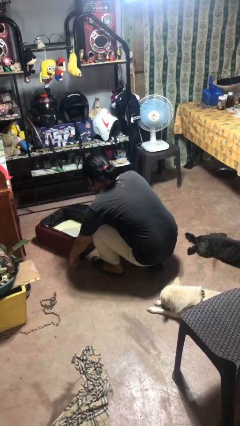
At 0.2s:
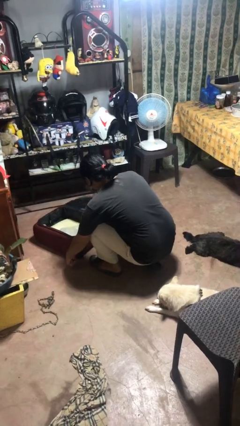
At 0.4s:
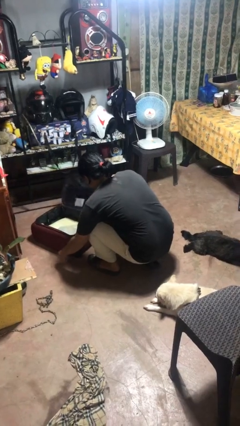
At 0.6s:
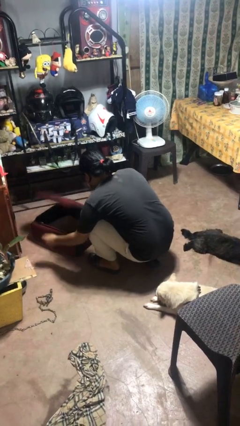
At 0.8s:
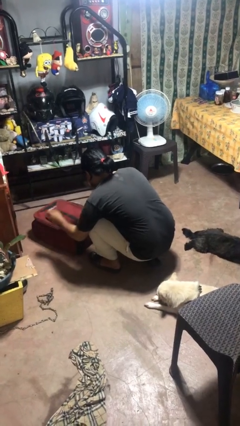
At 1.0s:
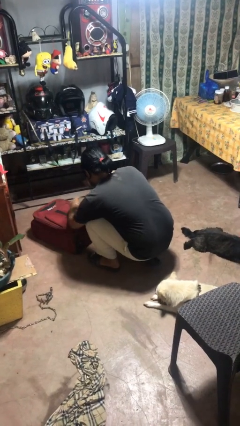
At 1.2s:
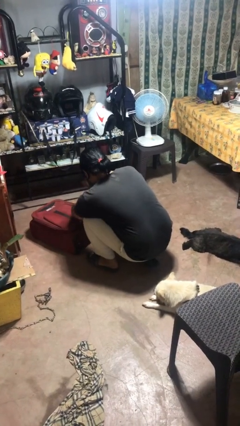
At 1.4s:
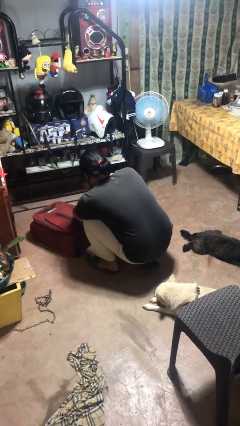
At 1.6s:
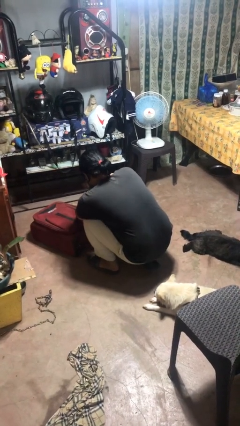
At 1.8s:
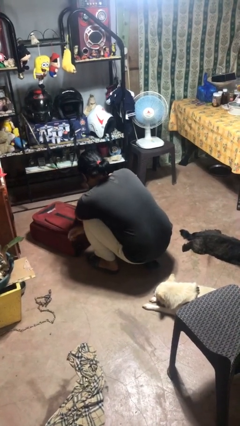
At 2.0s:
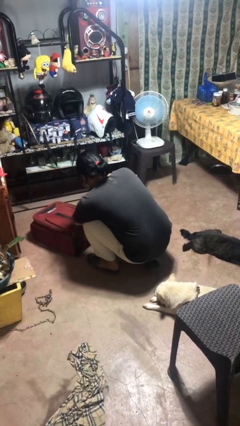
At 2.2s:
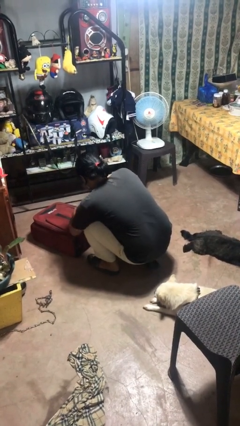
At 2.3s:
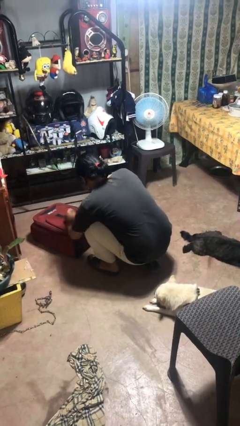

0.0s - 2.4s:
person closes suitcase

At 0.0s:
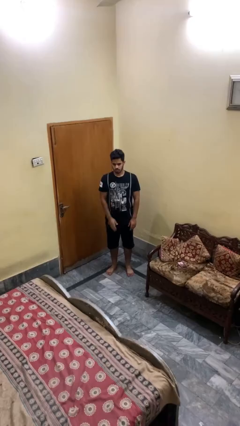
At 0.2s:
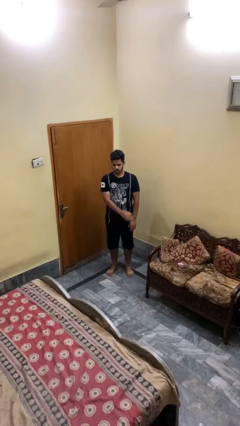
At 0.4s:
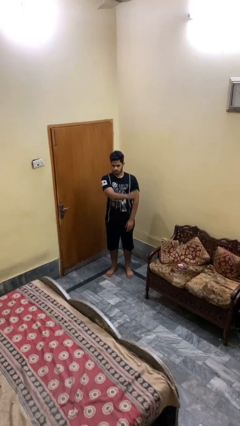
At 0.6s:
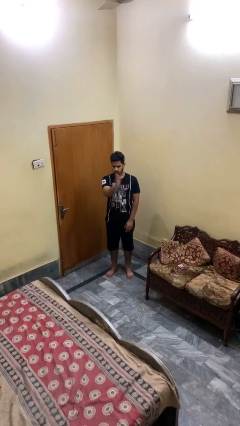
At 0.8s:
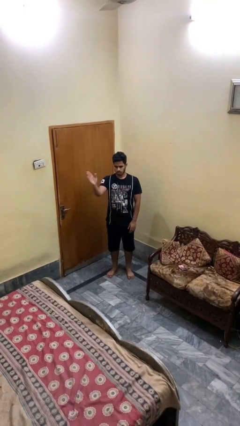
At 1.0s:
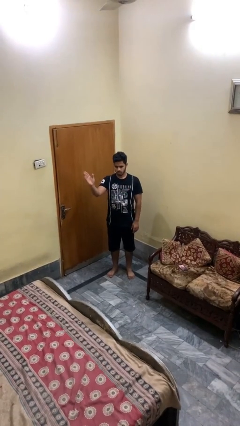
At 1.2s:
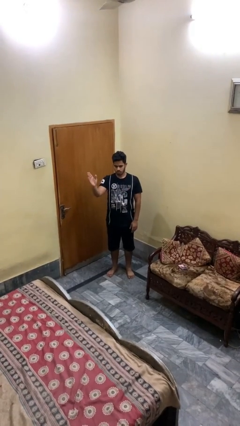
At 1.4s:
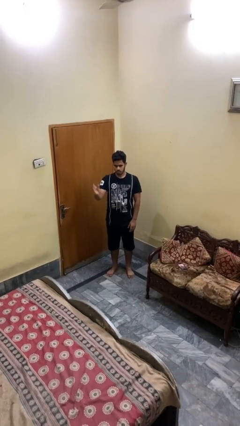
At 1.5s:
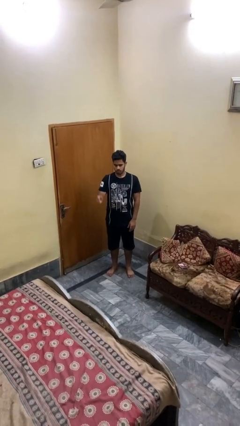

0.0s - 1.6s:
person gestures swipe right

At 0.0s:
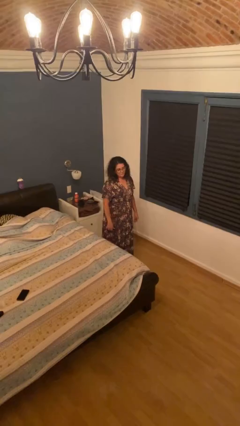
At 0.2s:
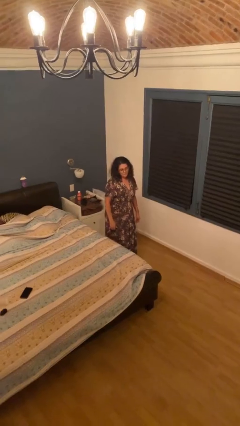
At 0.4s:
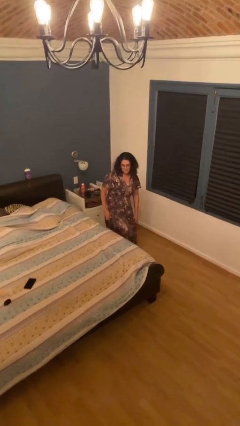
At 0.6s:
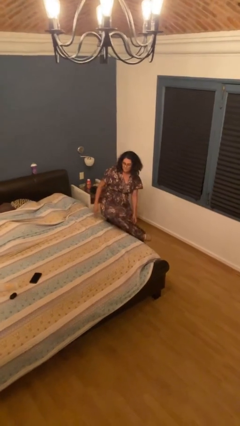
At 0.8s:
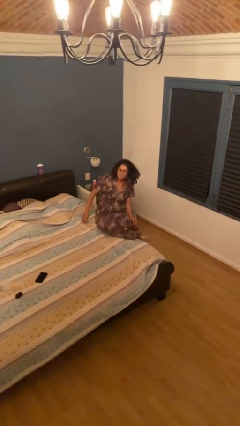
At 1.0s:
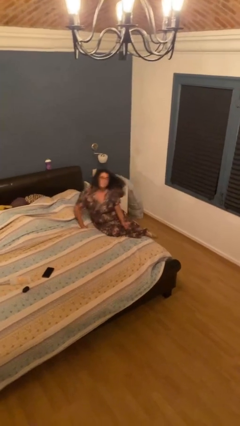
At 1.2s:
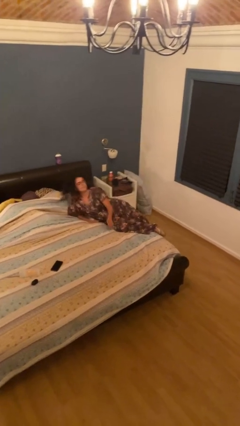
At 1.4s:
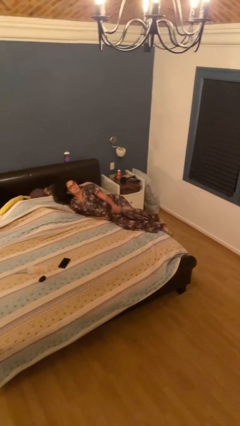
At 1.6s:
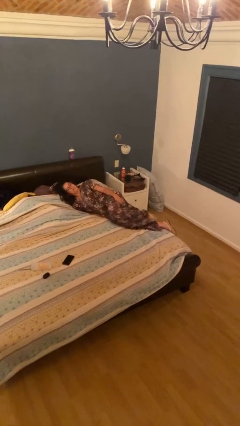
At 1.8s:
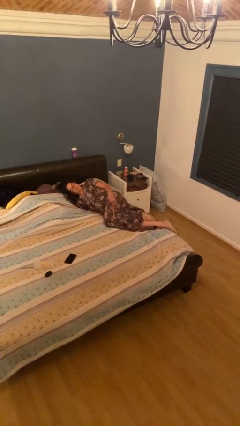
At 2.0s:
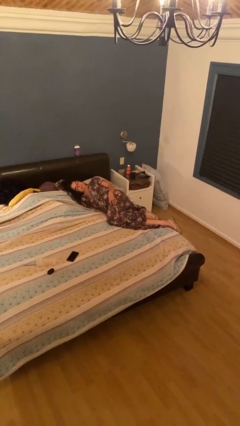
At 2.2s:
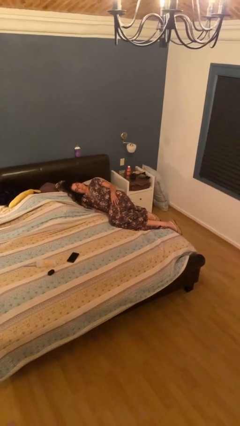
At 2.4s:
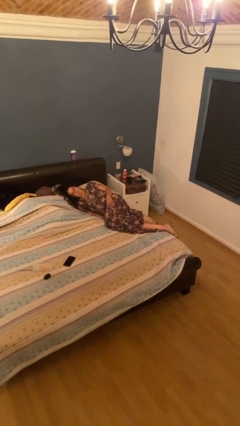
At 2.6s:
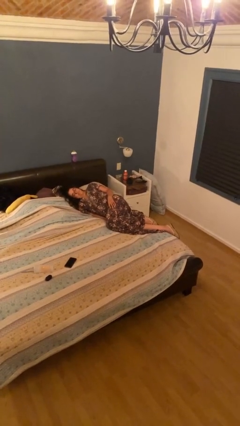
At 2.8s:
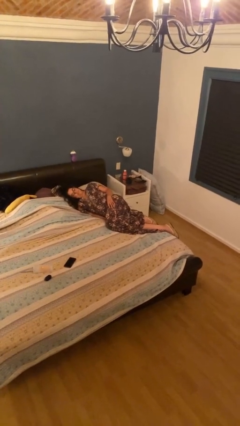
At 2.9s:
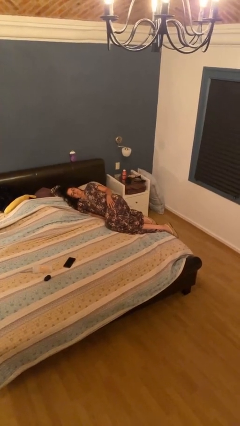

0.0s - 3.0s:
person lies down on bed

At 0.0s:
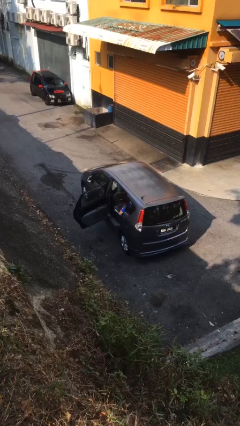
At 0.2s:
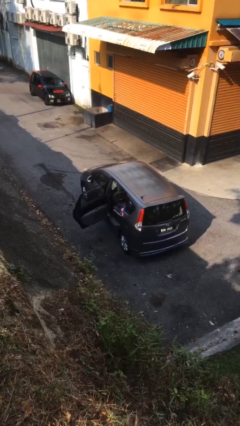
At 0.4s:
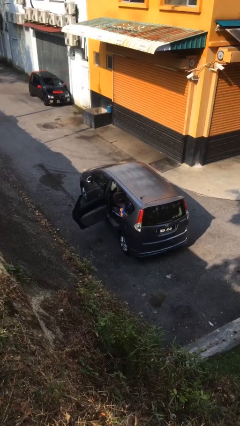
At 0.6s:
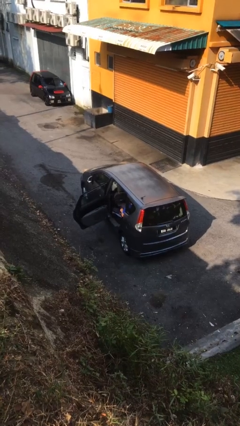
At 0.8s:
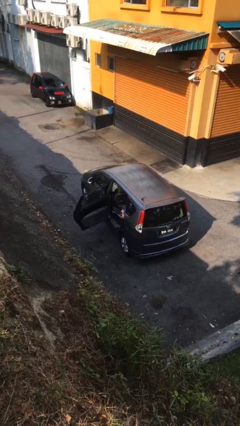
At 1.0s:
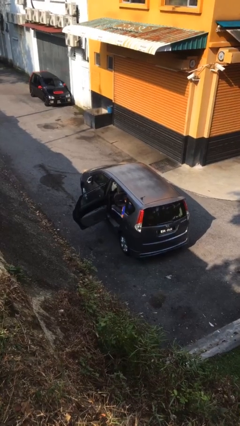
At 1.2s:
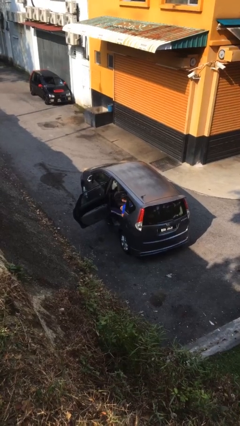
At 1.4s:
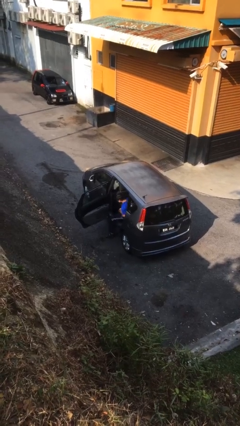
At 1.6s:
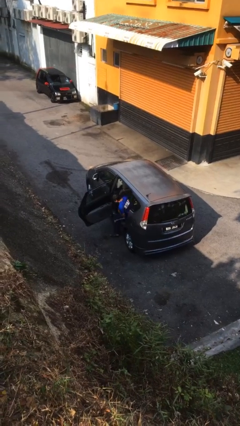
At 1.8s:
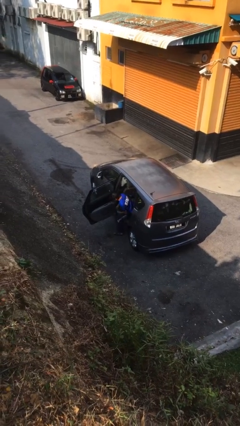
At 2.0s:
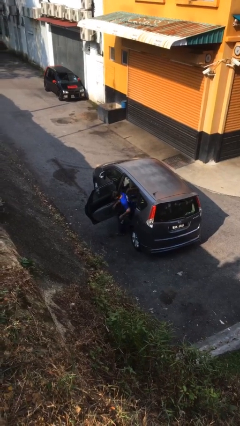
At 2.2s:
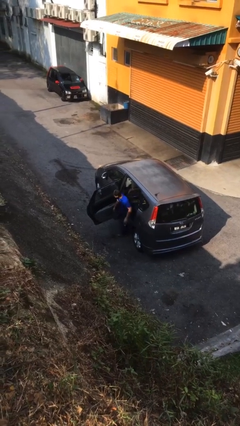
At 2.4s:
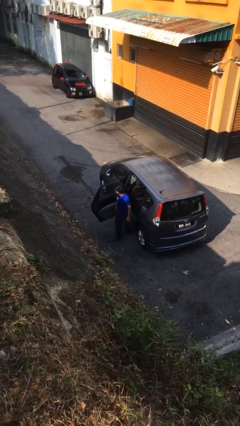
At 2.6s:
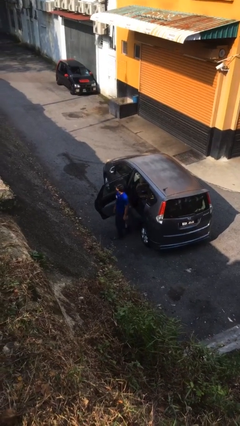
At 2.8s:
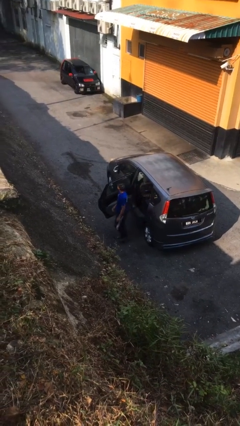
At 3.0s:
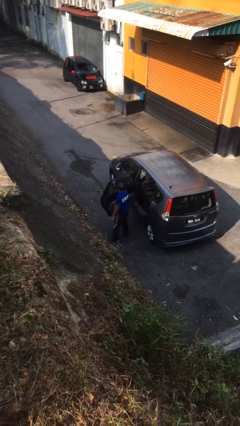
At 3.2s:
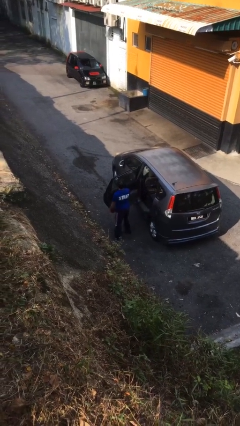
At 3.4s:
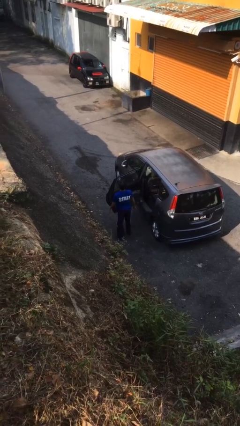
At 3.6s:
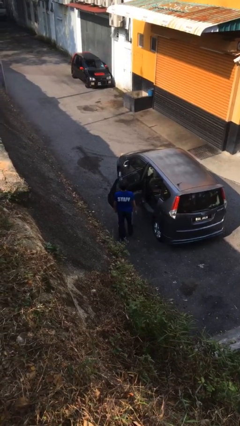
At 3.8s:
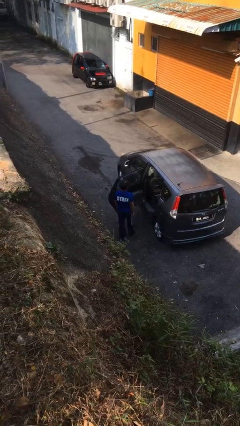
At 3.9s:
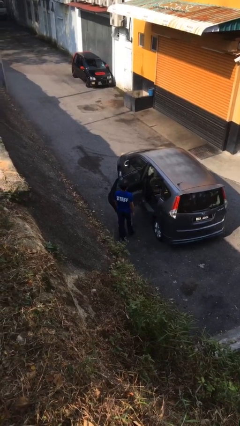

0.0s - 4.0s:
person exits car

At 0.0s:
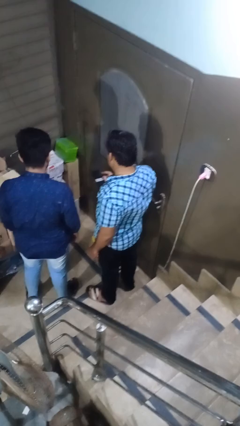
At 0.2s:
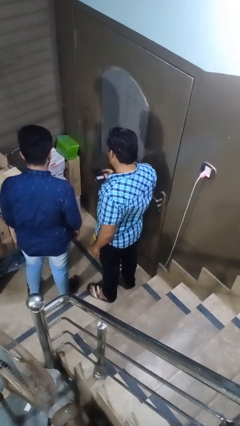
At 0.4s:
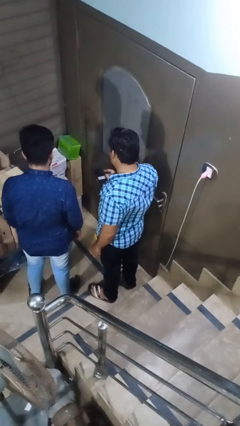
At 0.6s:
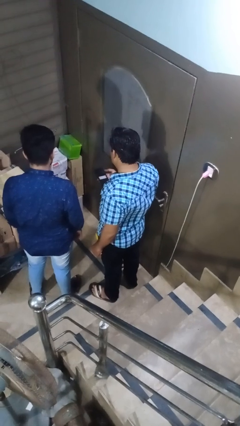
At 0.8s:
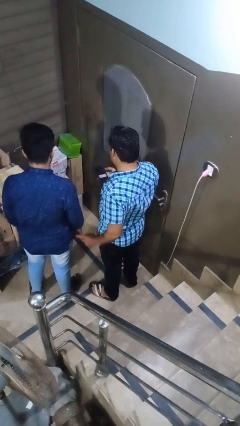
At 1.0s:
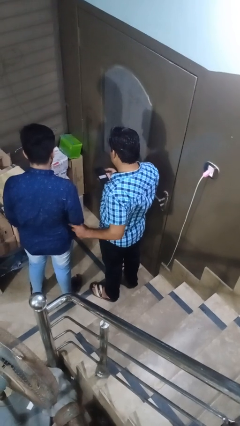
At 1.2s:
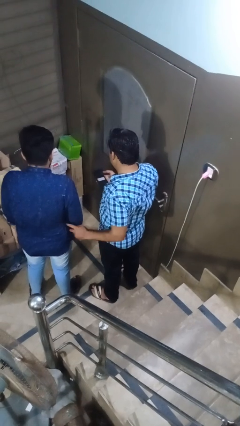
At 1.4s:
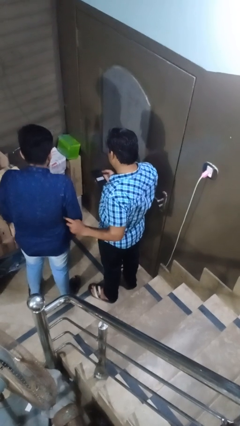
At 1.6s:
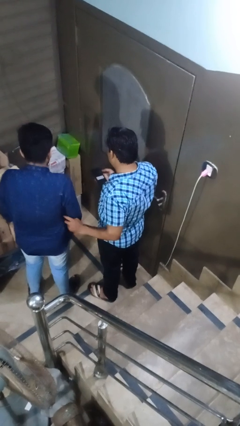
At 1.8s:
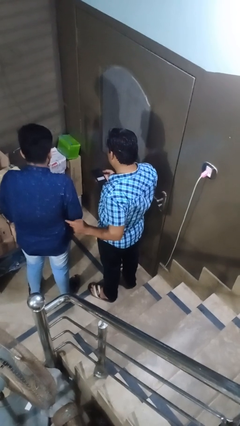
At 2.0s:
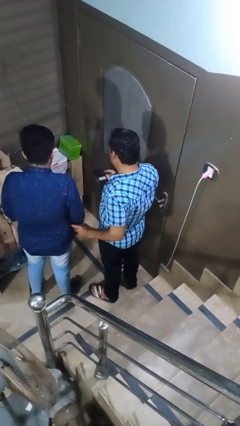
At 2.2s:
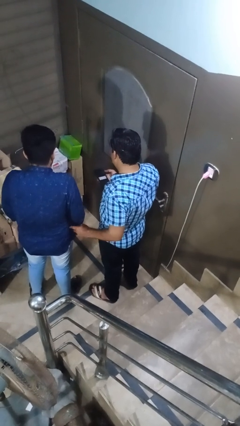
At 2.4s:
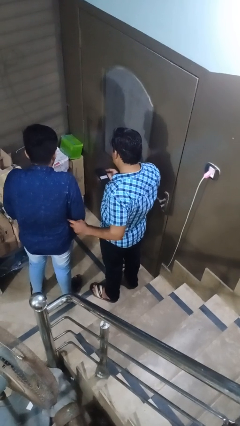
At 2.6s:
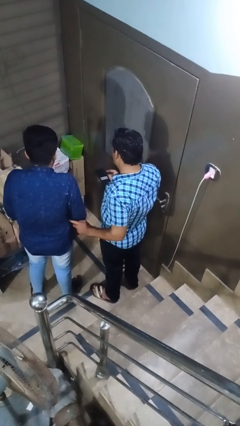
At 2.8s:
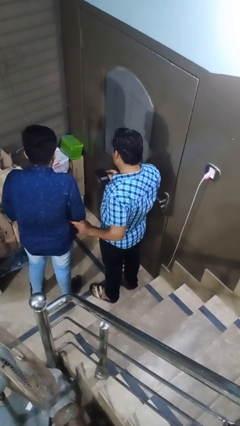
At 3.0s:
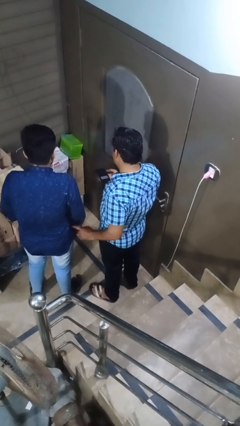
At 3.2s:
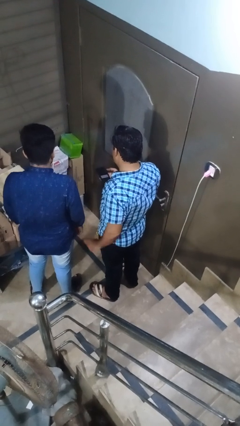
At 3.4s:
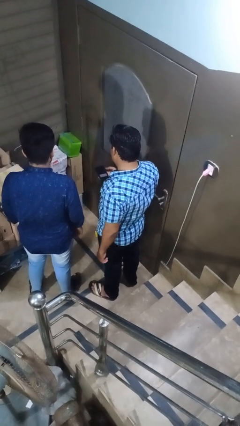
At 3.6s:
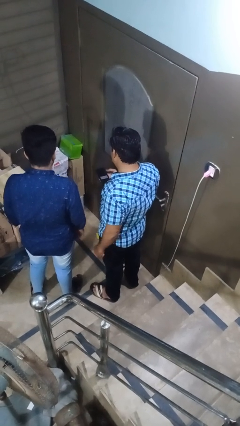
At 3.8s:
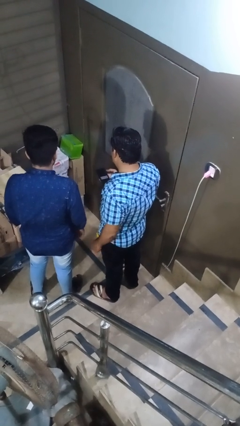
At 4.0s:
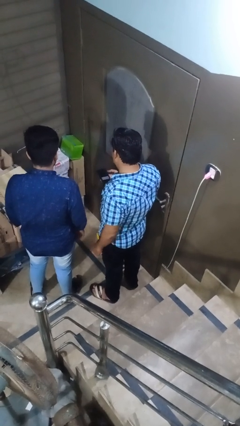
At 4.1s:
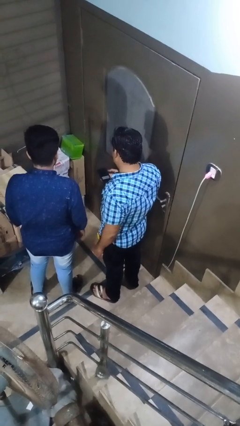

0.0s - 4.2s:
person tickles person

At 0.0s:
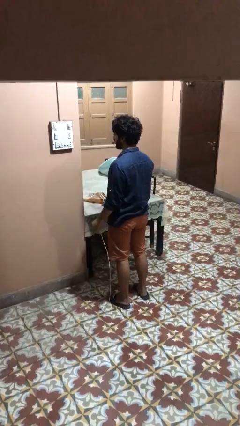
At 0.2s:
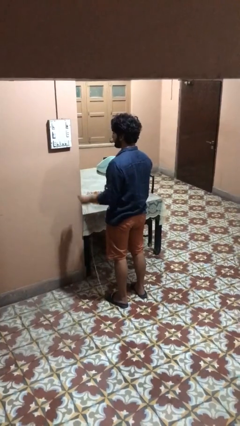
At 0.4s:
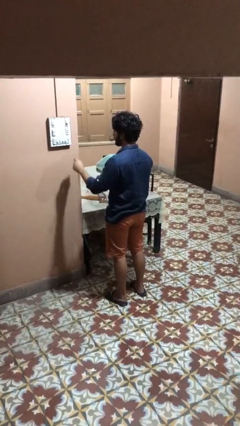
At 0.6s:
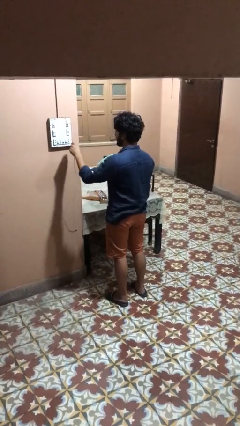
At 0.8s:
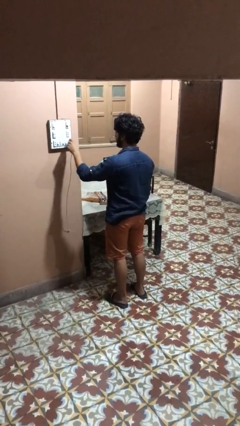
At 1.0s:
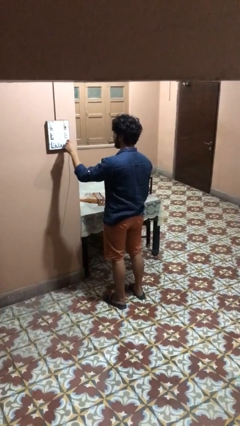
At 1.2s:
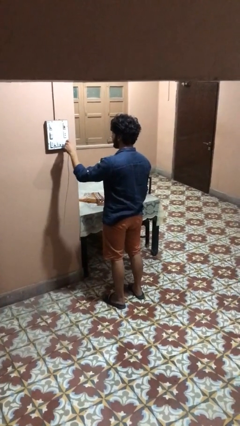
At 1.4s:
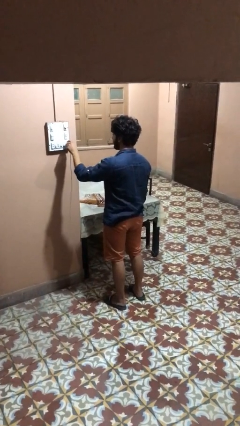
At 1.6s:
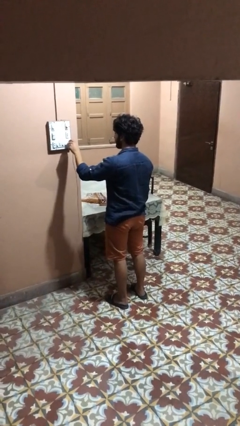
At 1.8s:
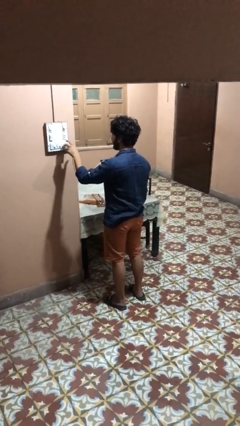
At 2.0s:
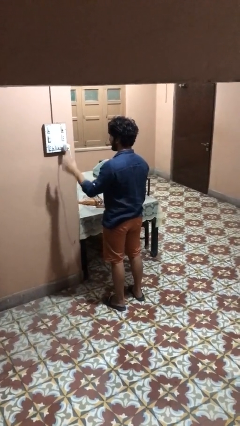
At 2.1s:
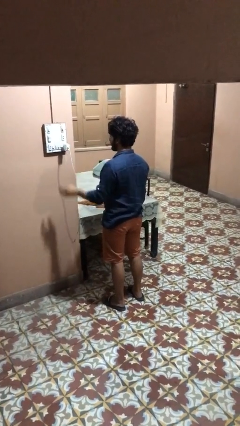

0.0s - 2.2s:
person plugs into electrical socket
